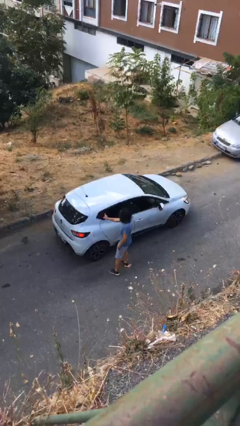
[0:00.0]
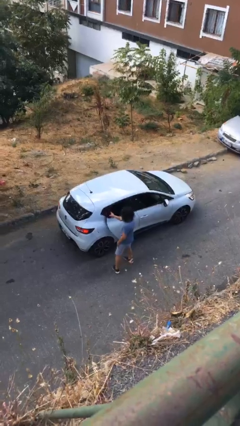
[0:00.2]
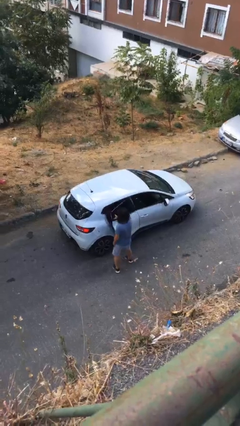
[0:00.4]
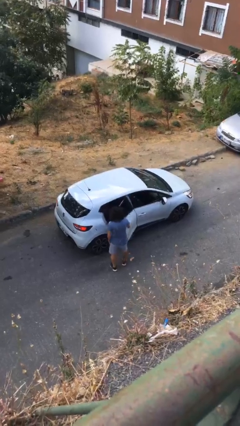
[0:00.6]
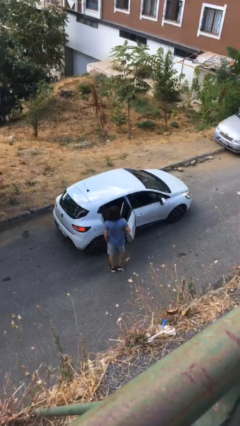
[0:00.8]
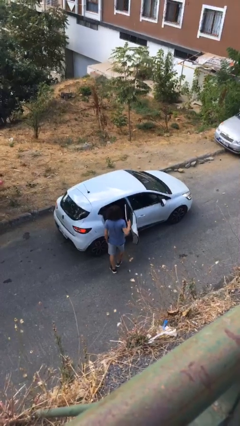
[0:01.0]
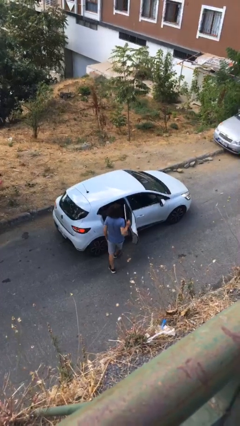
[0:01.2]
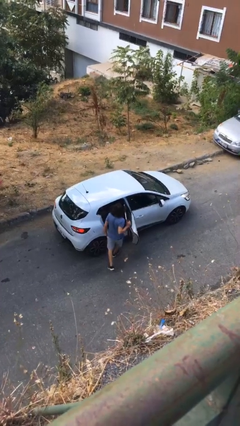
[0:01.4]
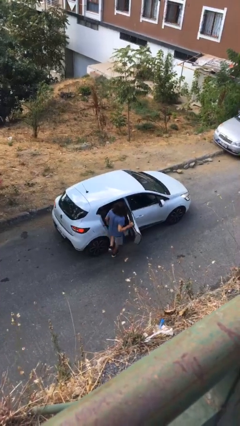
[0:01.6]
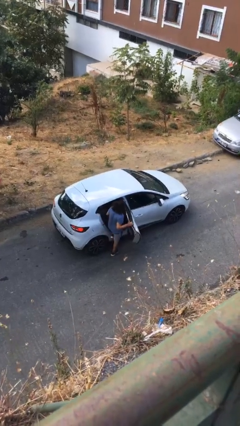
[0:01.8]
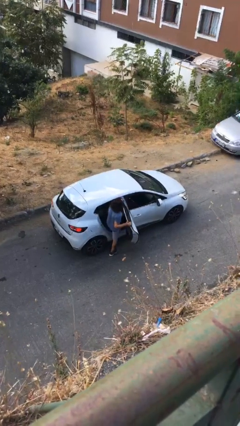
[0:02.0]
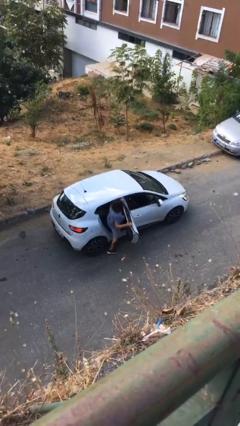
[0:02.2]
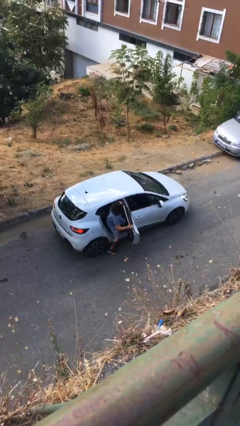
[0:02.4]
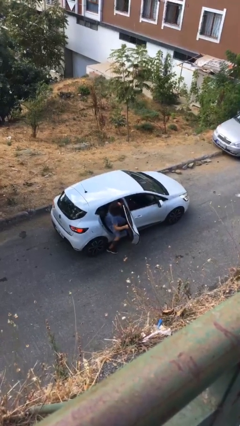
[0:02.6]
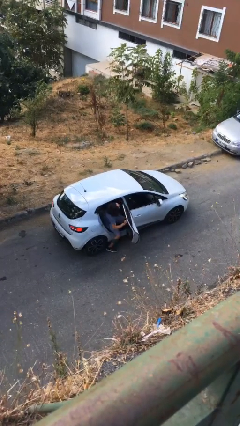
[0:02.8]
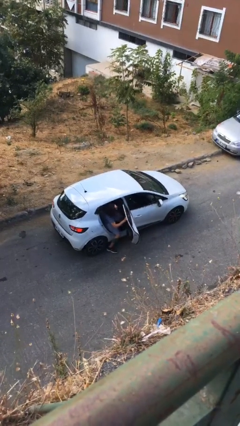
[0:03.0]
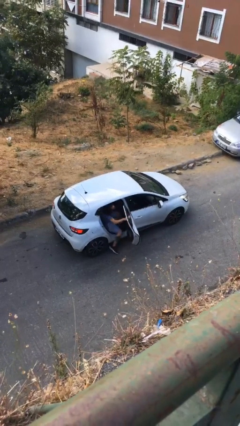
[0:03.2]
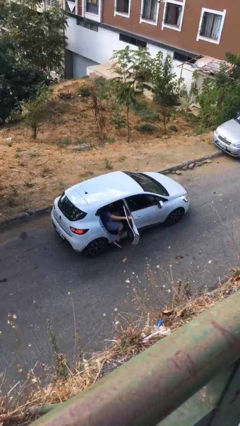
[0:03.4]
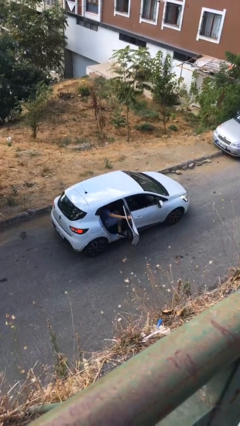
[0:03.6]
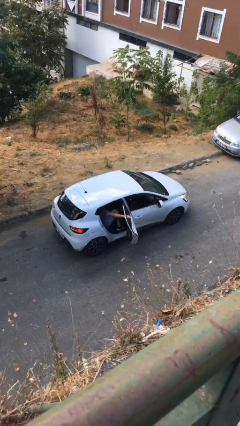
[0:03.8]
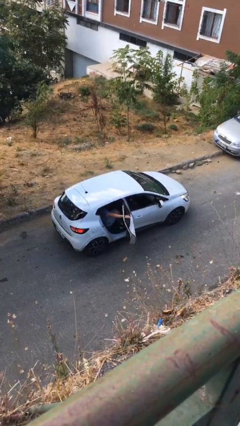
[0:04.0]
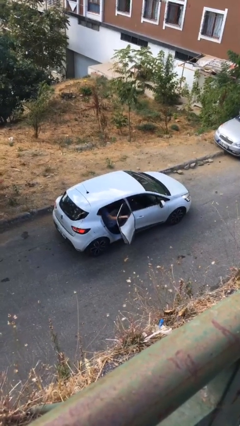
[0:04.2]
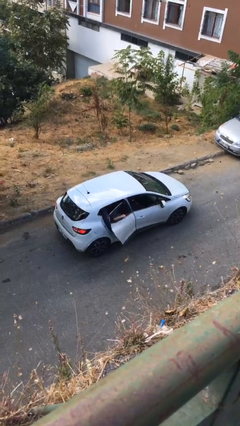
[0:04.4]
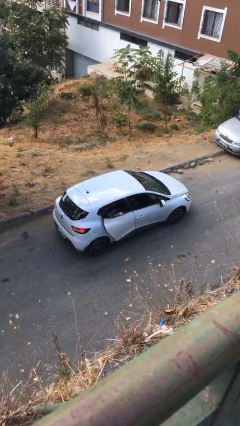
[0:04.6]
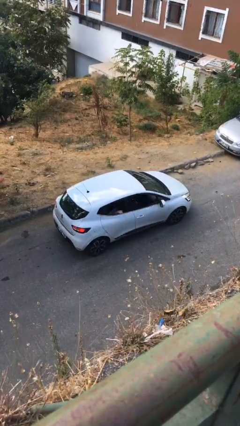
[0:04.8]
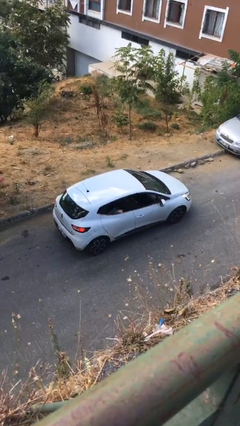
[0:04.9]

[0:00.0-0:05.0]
car picks up person

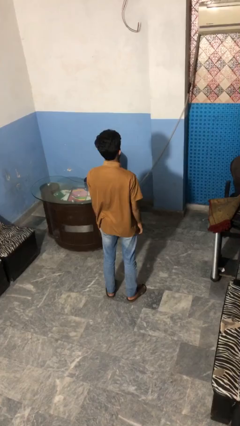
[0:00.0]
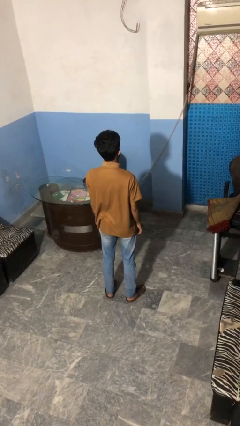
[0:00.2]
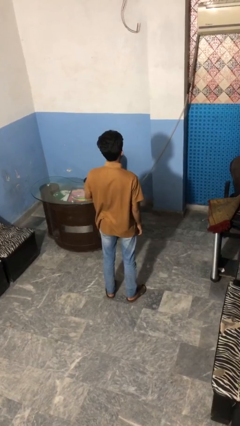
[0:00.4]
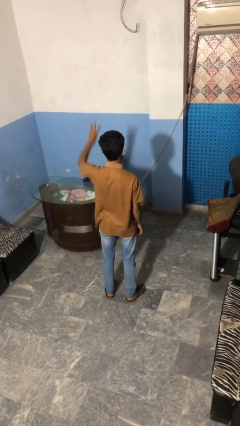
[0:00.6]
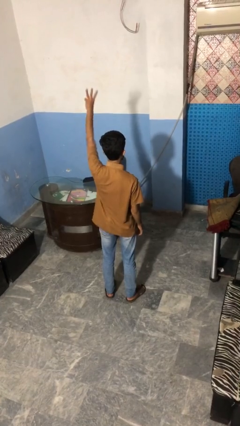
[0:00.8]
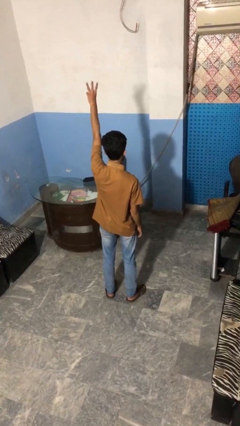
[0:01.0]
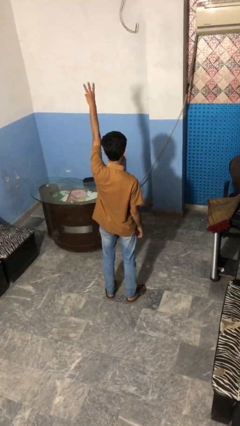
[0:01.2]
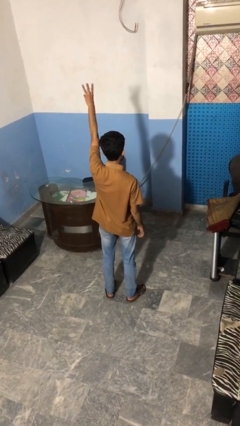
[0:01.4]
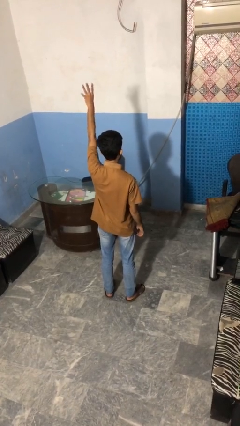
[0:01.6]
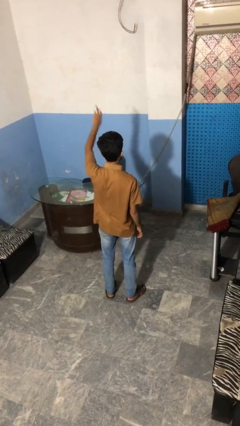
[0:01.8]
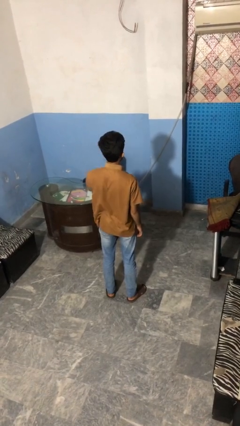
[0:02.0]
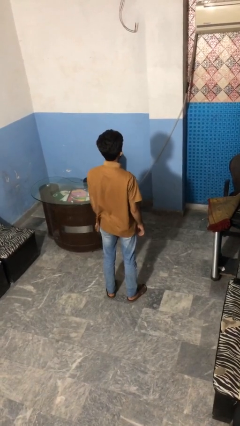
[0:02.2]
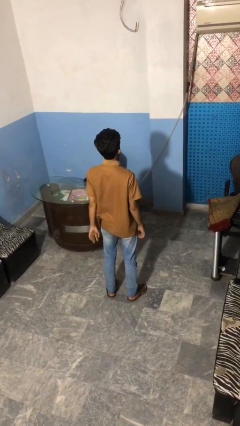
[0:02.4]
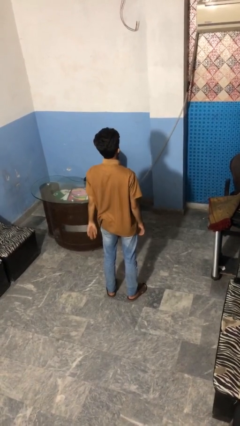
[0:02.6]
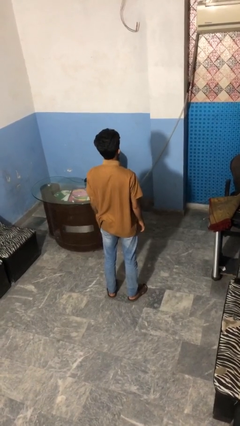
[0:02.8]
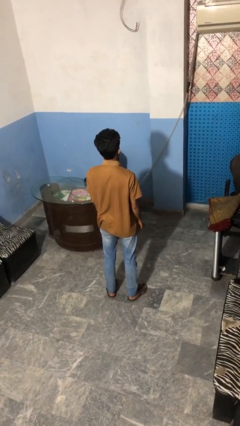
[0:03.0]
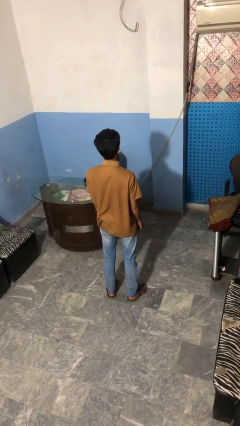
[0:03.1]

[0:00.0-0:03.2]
person gestures number three

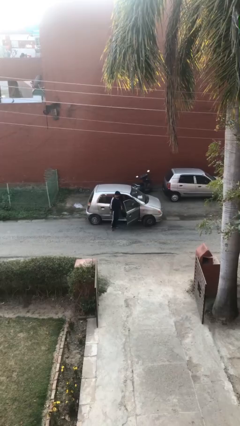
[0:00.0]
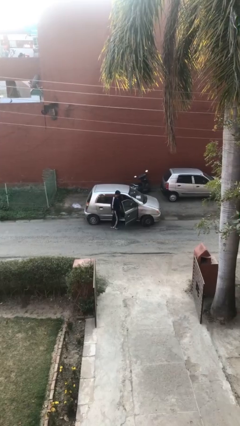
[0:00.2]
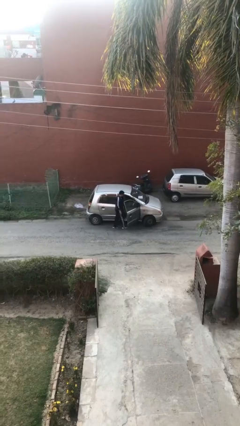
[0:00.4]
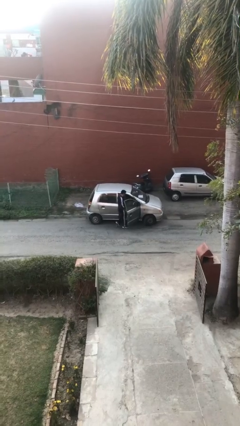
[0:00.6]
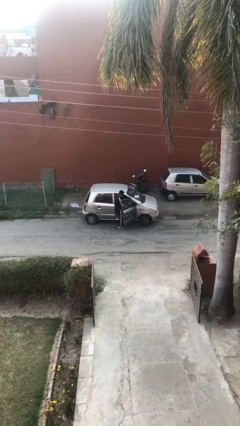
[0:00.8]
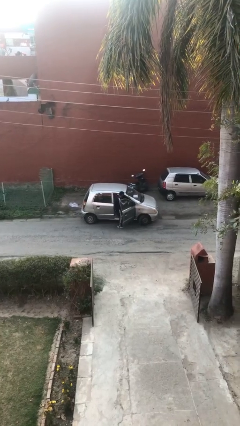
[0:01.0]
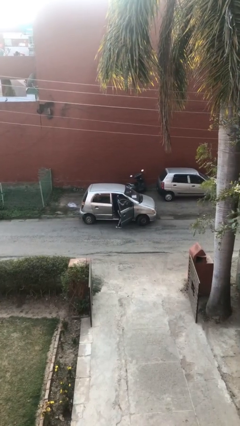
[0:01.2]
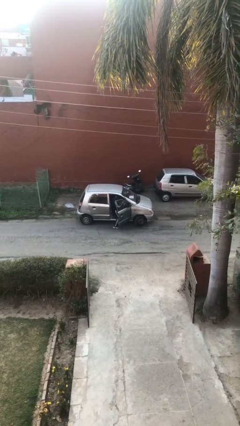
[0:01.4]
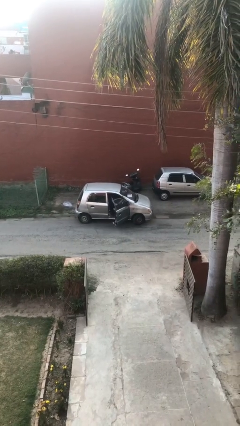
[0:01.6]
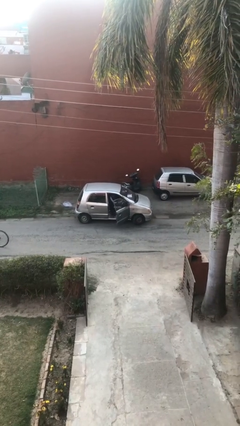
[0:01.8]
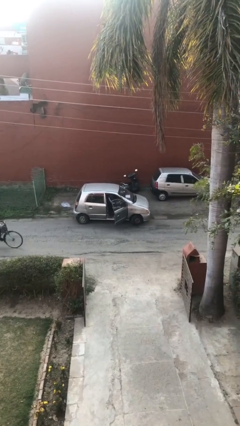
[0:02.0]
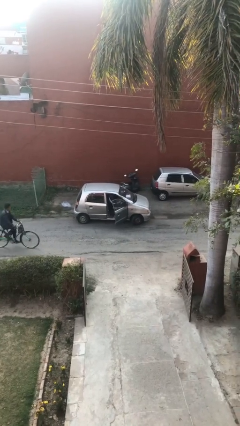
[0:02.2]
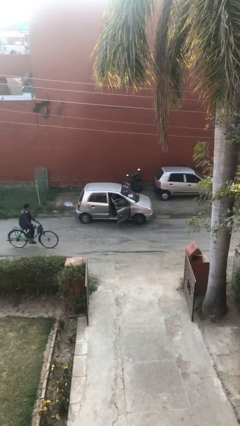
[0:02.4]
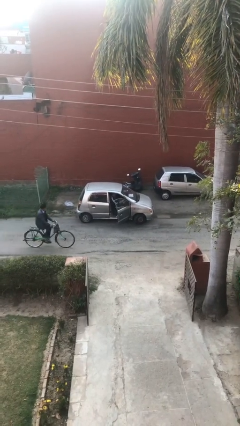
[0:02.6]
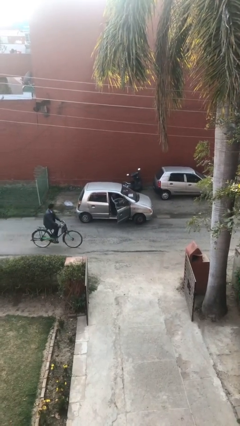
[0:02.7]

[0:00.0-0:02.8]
person enters car

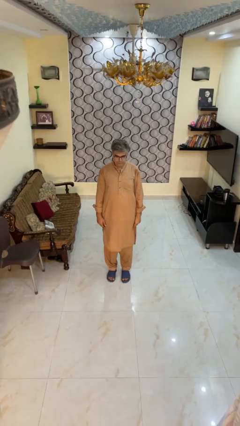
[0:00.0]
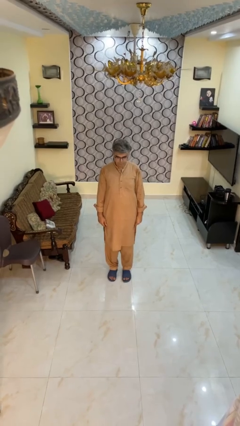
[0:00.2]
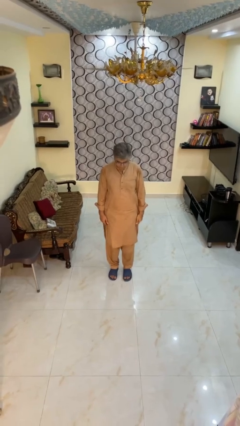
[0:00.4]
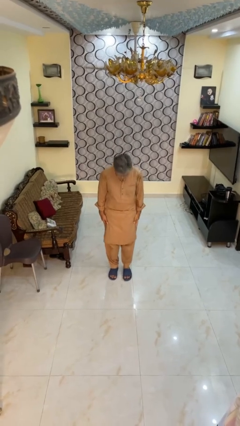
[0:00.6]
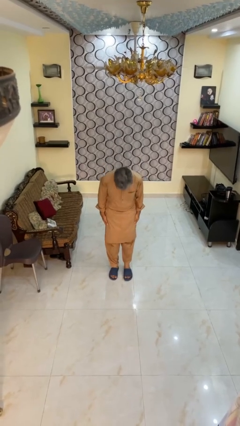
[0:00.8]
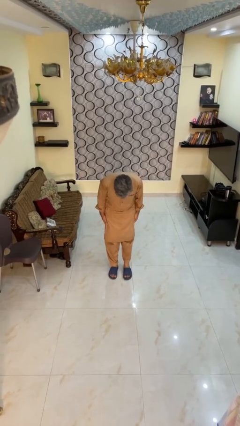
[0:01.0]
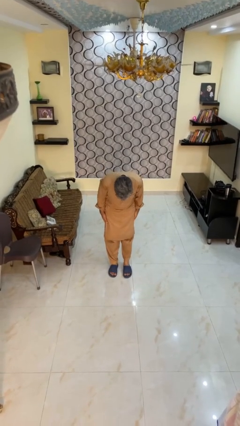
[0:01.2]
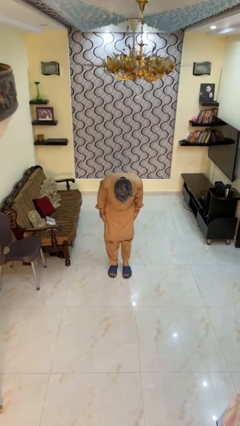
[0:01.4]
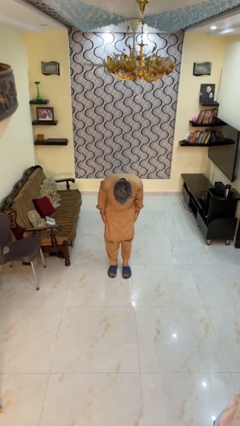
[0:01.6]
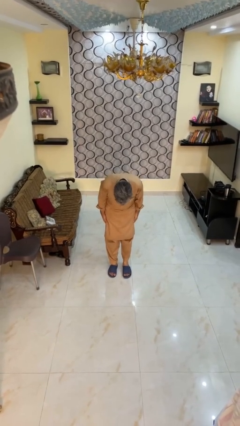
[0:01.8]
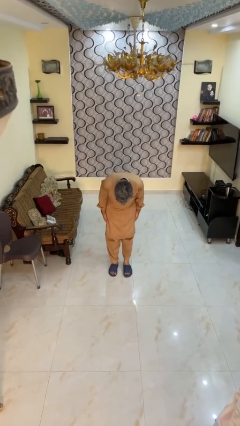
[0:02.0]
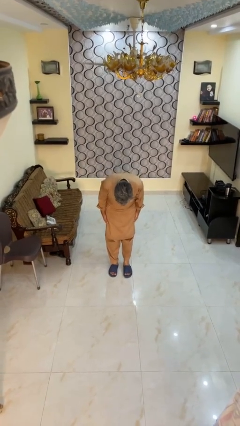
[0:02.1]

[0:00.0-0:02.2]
person bows

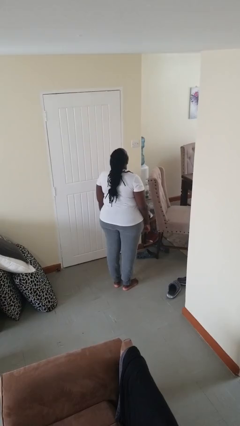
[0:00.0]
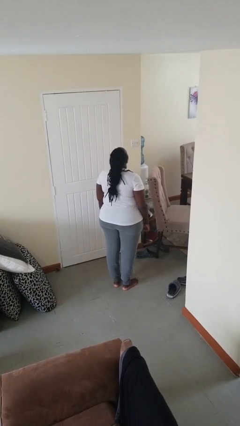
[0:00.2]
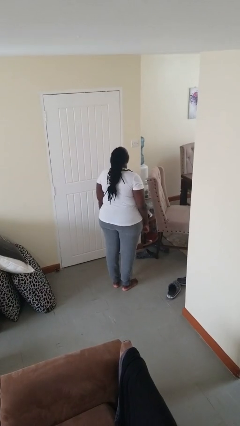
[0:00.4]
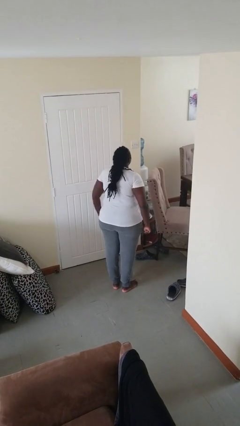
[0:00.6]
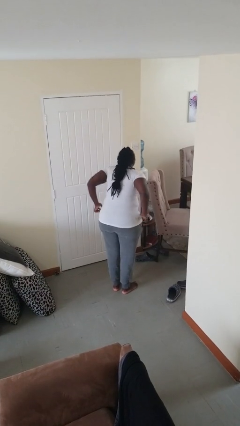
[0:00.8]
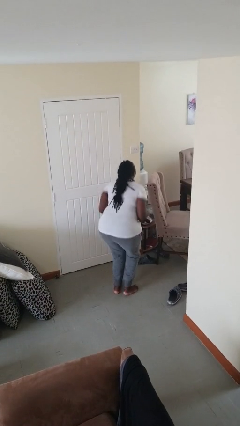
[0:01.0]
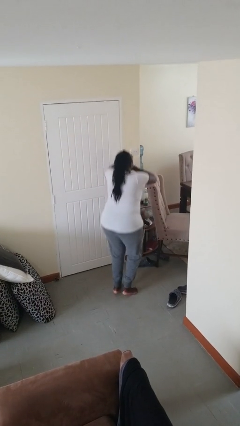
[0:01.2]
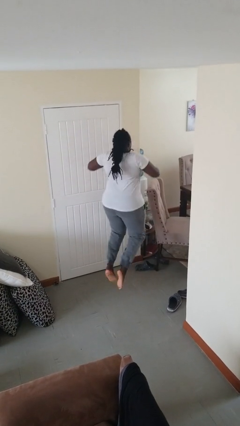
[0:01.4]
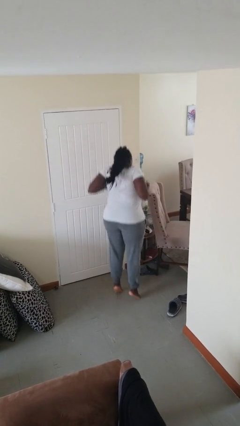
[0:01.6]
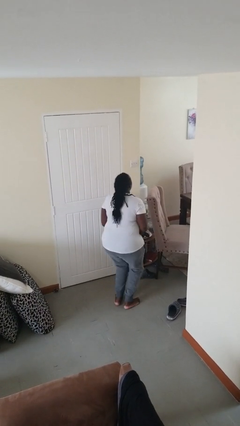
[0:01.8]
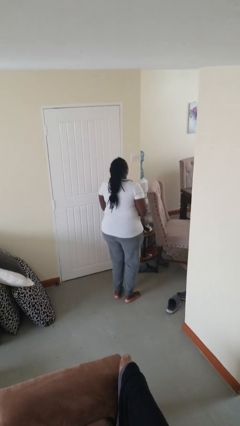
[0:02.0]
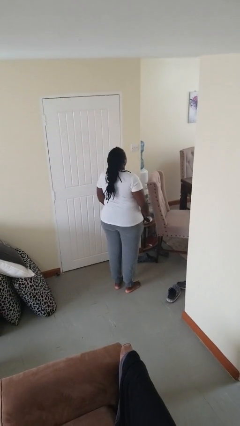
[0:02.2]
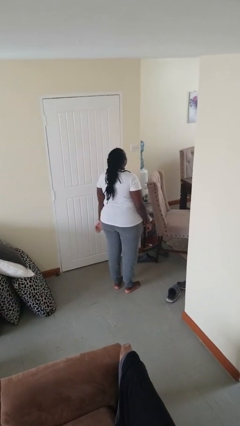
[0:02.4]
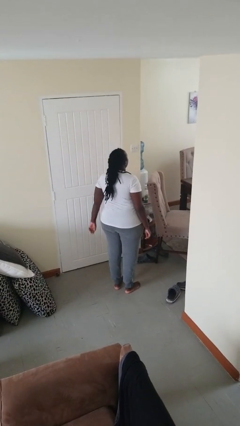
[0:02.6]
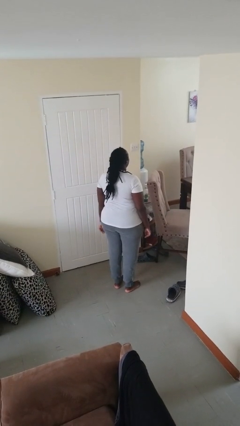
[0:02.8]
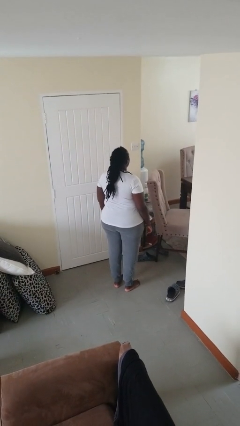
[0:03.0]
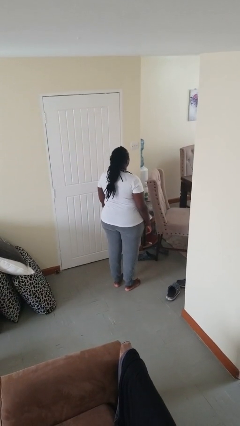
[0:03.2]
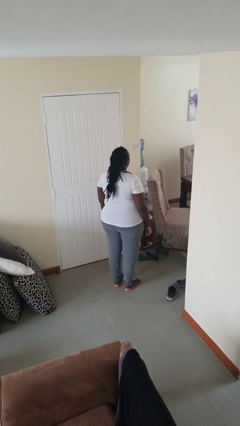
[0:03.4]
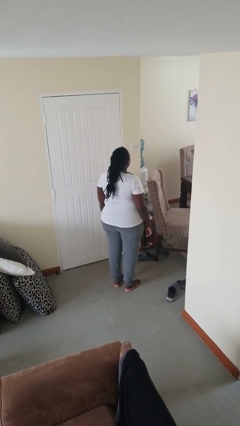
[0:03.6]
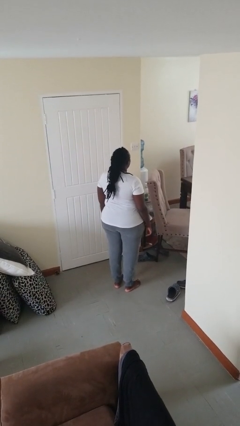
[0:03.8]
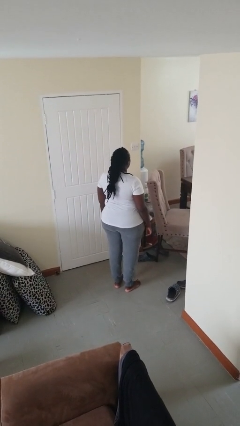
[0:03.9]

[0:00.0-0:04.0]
person jumps
